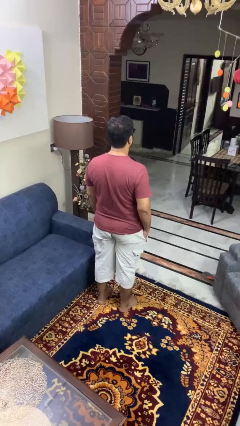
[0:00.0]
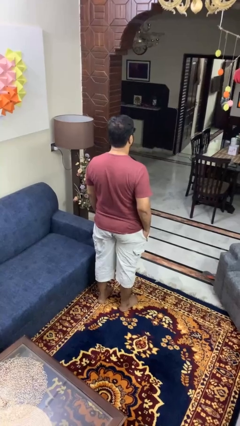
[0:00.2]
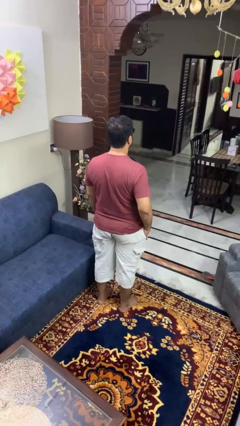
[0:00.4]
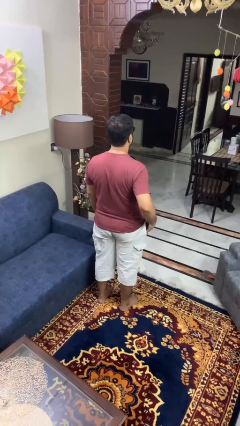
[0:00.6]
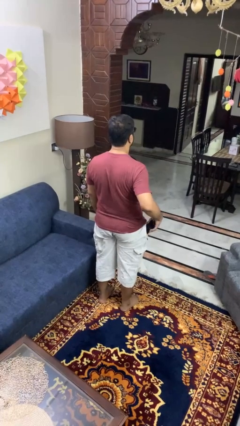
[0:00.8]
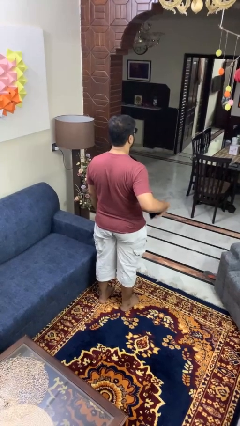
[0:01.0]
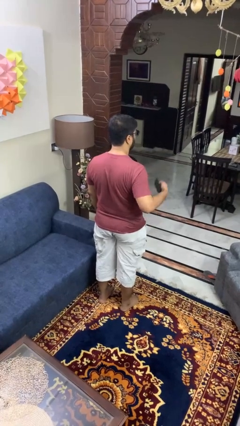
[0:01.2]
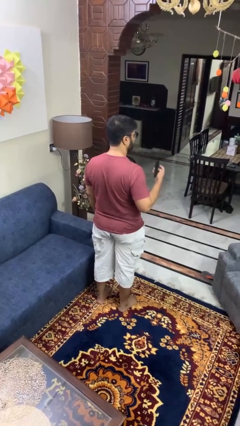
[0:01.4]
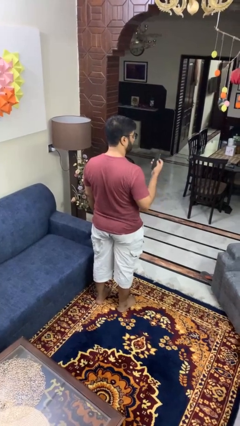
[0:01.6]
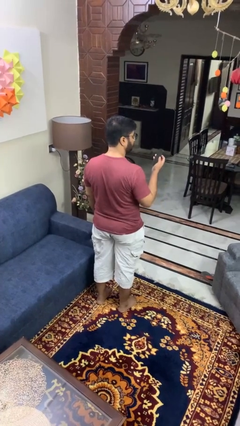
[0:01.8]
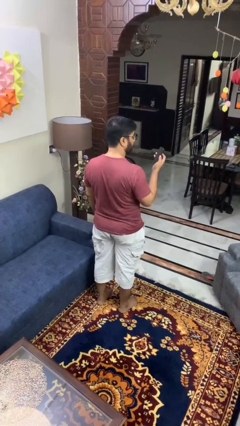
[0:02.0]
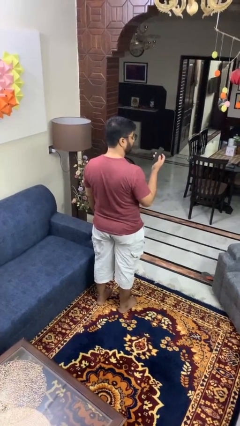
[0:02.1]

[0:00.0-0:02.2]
person takes phone from pocket

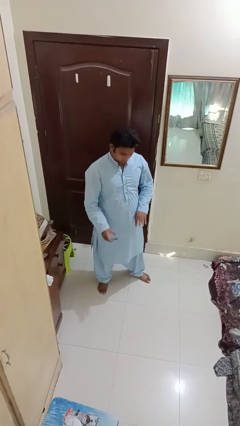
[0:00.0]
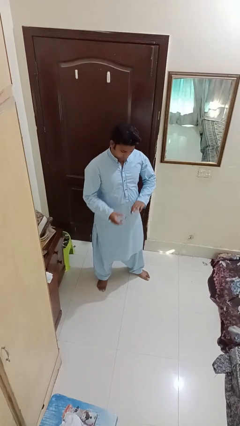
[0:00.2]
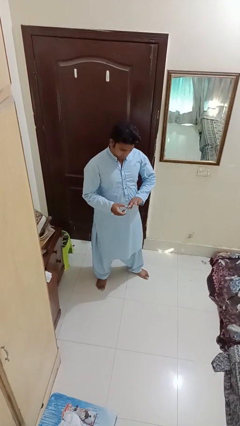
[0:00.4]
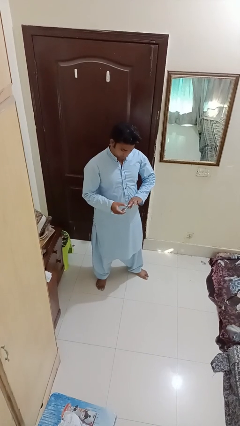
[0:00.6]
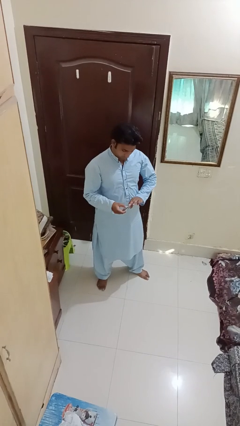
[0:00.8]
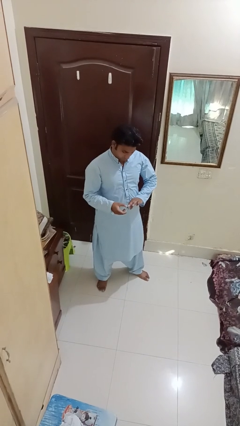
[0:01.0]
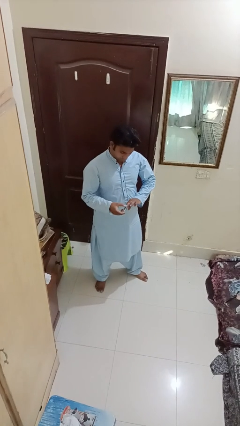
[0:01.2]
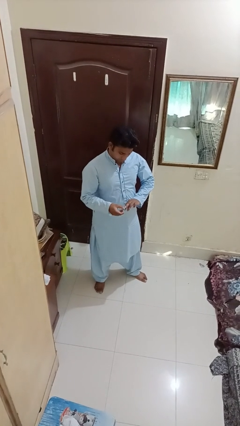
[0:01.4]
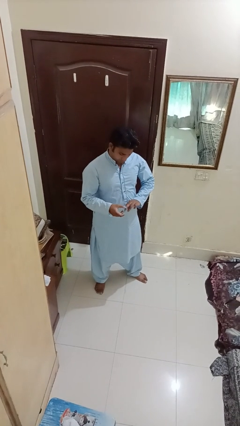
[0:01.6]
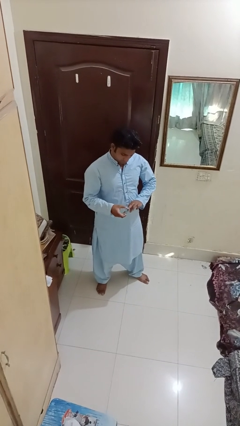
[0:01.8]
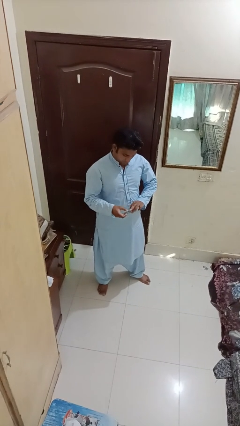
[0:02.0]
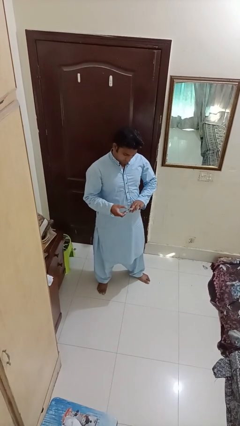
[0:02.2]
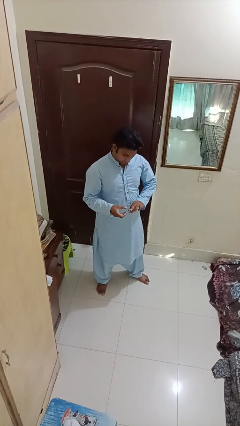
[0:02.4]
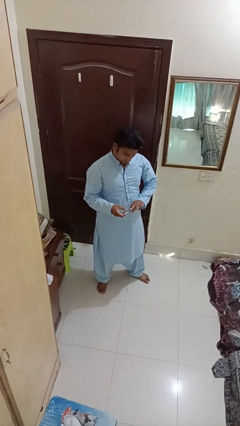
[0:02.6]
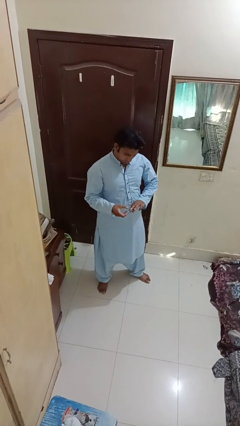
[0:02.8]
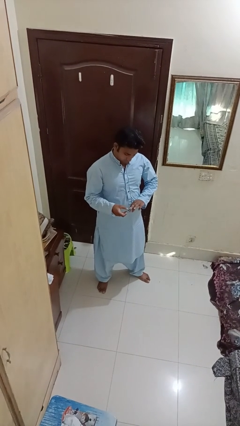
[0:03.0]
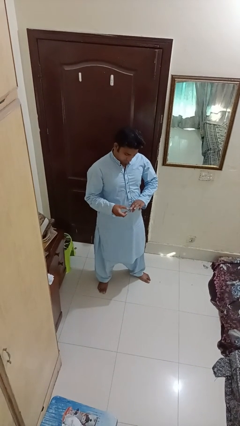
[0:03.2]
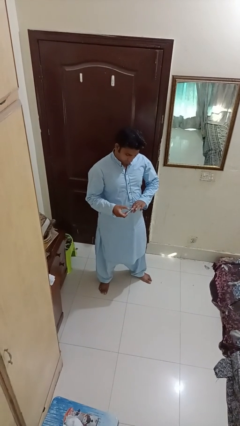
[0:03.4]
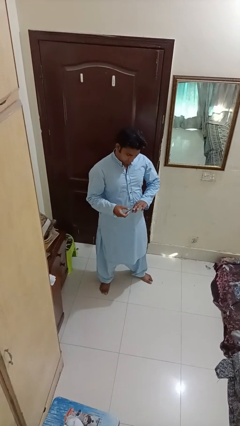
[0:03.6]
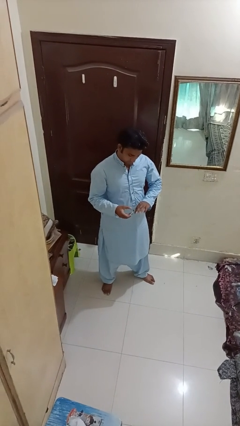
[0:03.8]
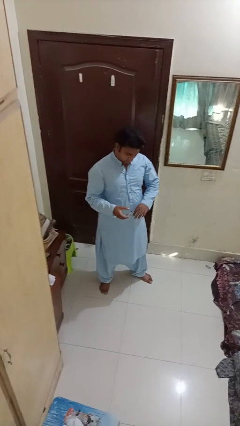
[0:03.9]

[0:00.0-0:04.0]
person clips fingernails

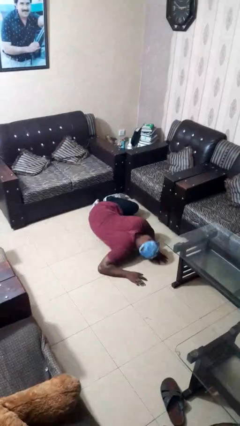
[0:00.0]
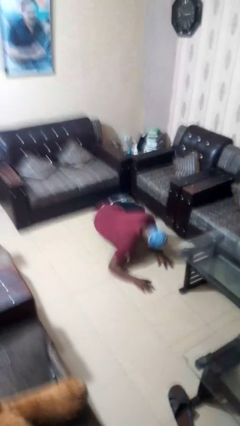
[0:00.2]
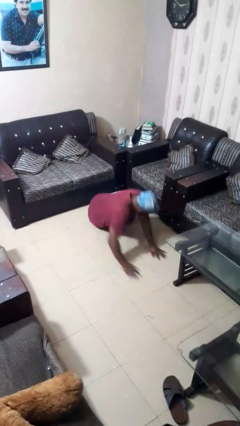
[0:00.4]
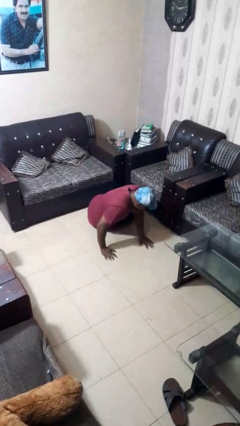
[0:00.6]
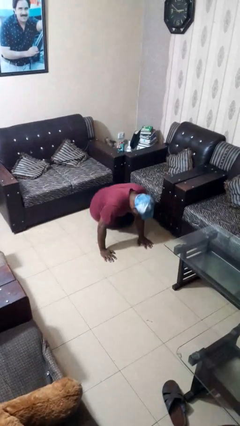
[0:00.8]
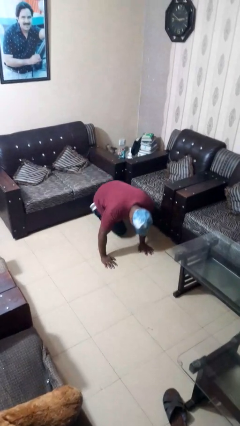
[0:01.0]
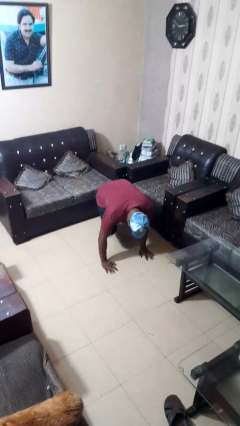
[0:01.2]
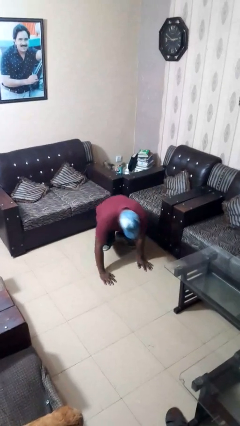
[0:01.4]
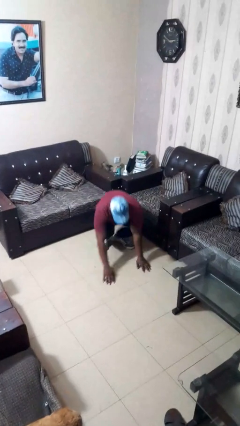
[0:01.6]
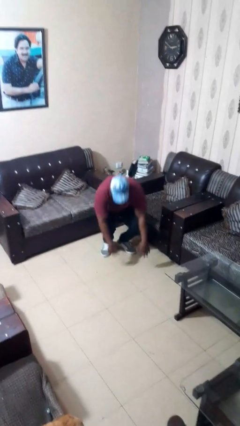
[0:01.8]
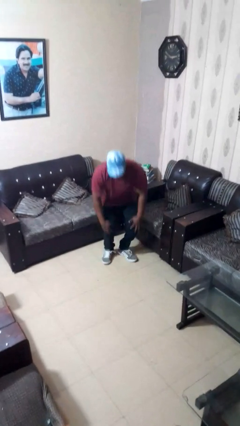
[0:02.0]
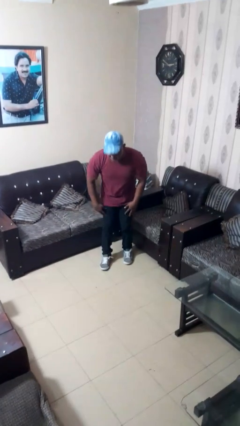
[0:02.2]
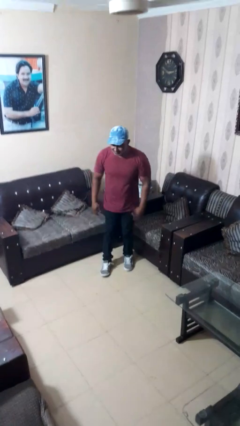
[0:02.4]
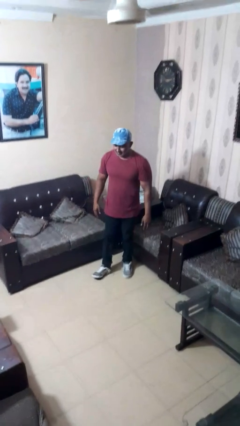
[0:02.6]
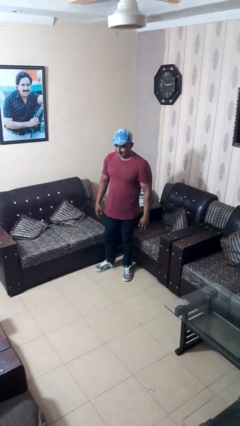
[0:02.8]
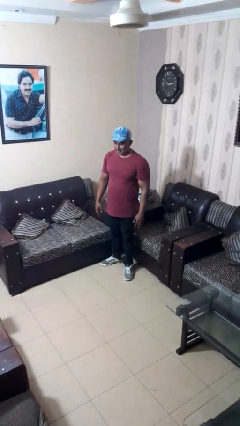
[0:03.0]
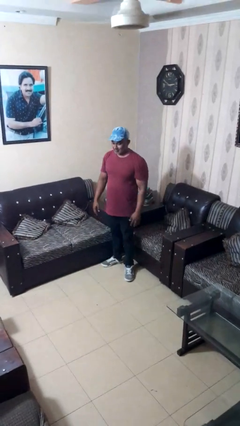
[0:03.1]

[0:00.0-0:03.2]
person stands up from floor

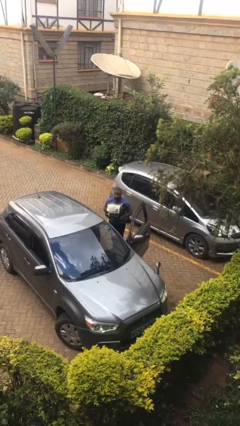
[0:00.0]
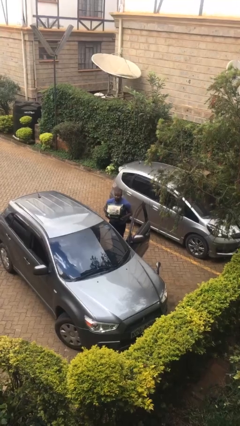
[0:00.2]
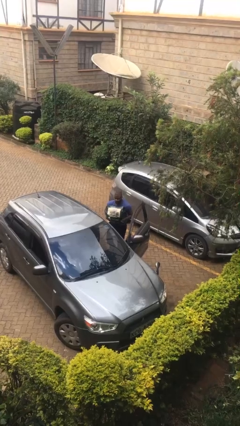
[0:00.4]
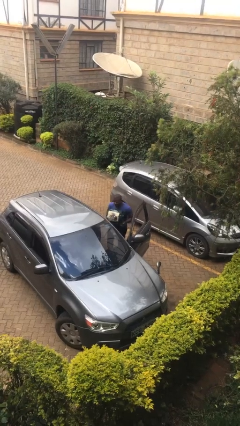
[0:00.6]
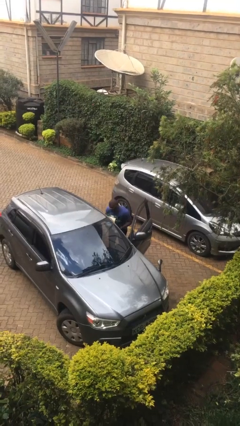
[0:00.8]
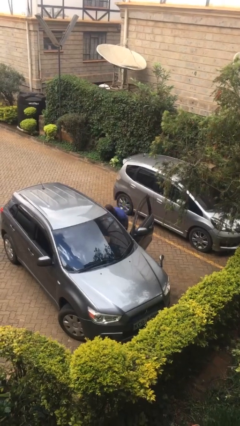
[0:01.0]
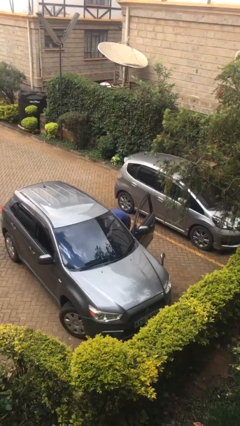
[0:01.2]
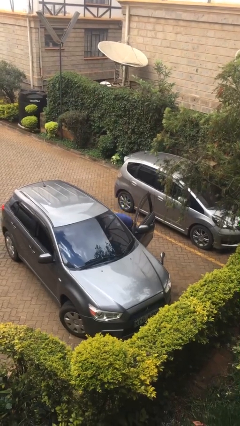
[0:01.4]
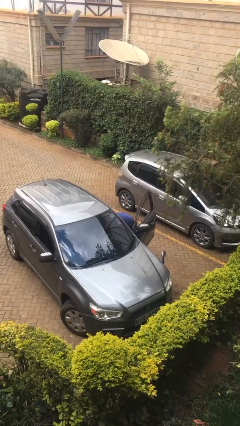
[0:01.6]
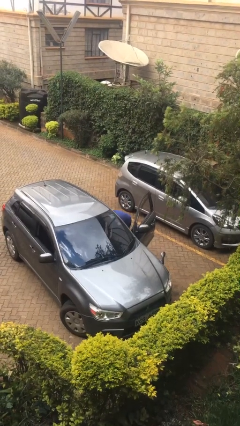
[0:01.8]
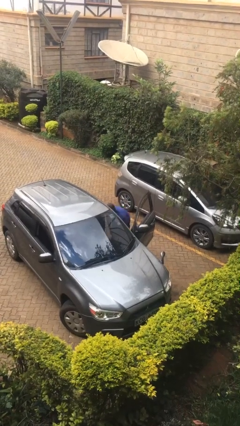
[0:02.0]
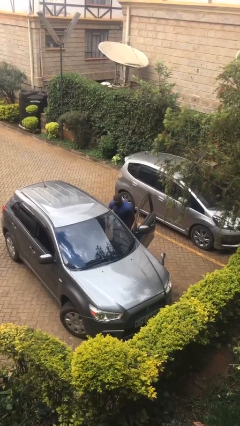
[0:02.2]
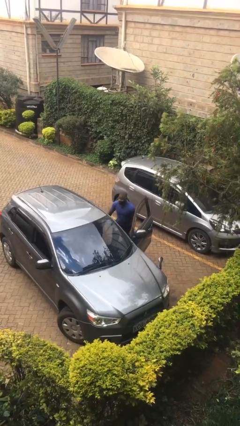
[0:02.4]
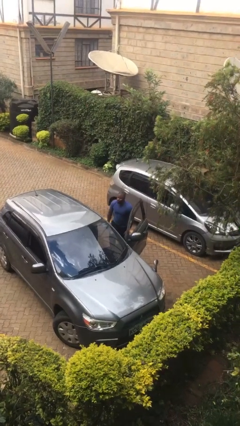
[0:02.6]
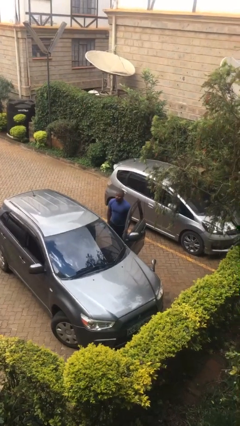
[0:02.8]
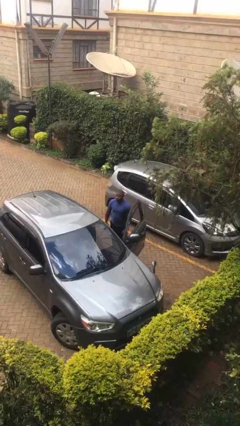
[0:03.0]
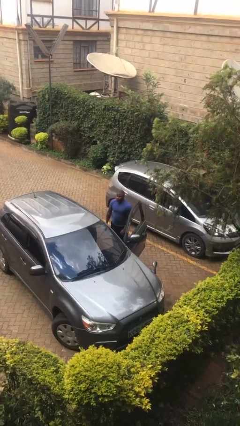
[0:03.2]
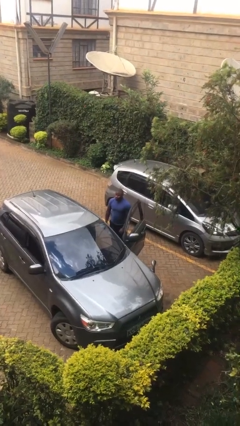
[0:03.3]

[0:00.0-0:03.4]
person loads car

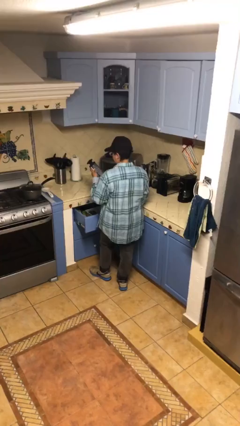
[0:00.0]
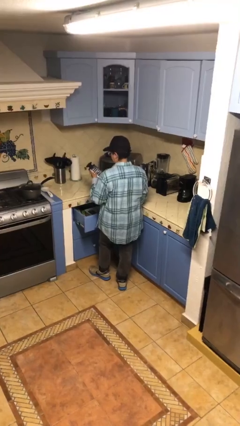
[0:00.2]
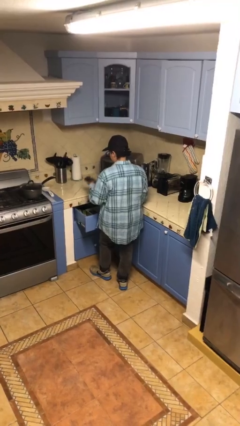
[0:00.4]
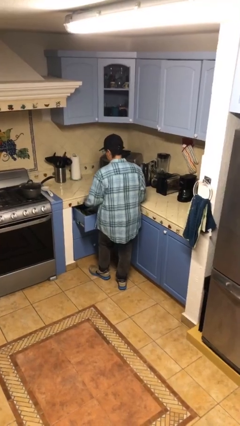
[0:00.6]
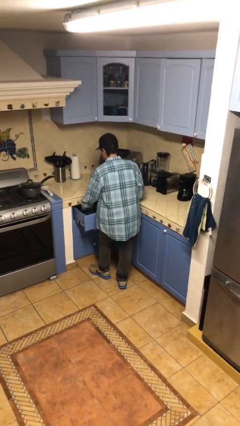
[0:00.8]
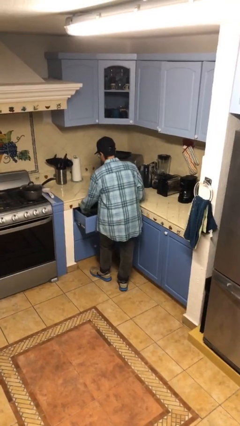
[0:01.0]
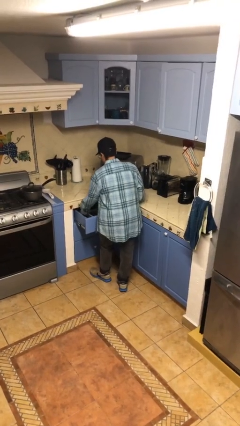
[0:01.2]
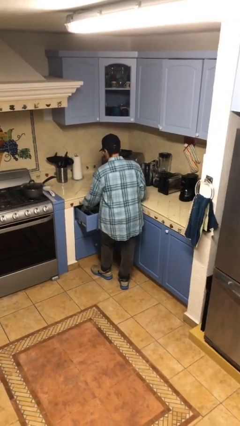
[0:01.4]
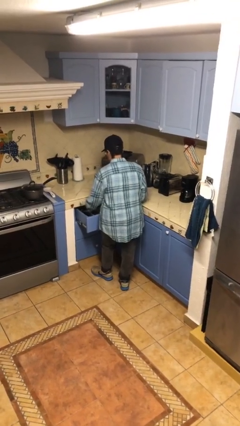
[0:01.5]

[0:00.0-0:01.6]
person puts object into kitchen drawer

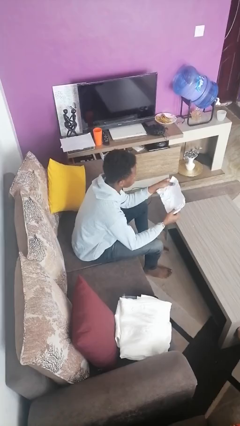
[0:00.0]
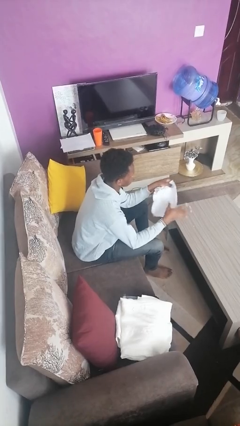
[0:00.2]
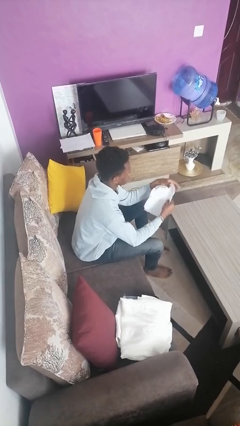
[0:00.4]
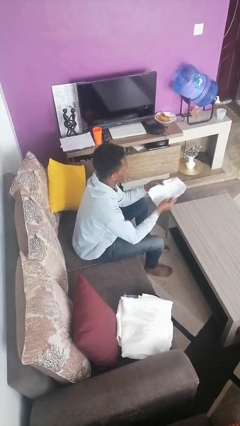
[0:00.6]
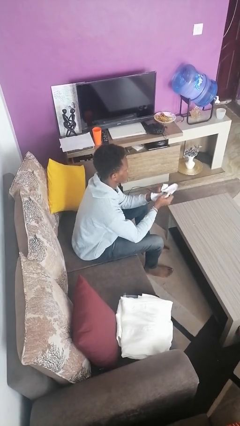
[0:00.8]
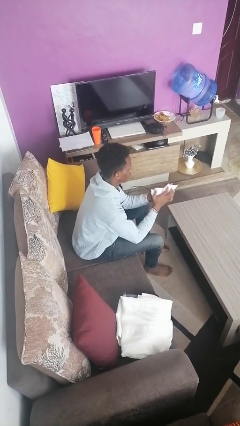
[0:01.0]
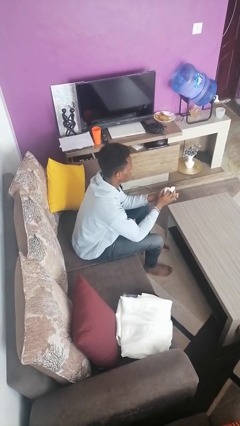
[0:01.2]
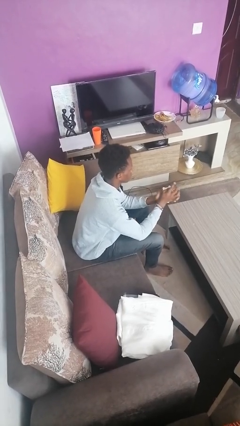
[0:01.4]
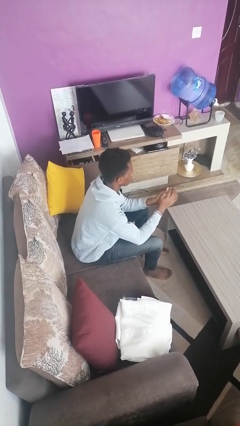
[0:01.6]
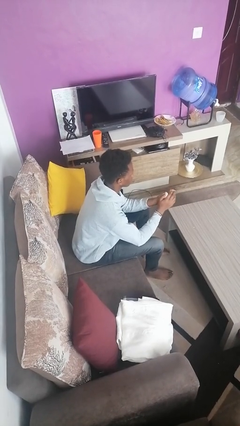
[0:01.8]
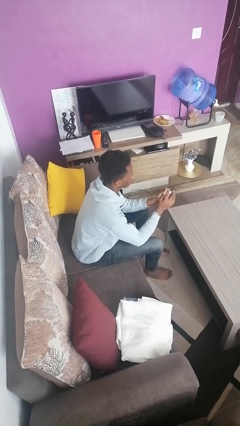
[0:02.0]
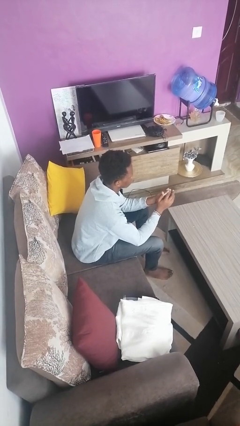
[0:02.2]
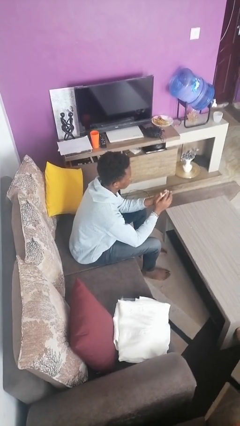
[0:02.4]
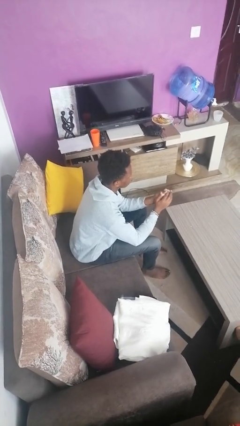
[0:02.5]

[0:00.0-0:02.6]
person crumples paper

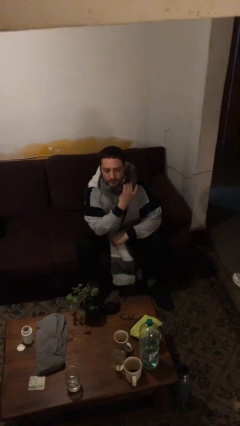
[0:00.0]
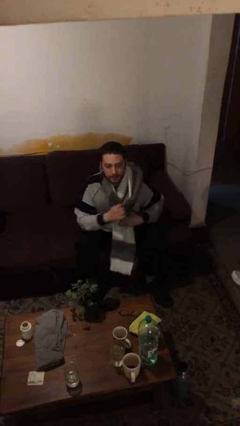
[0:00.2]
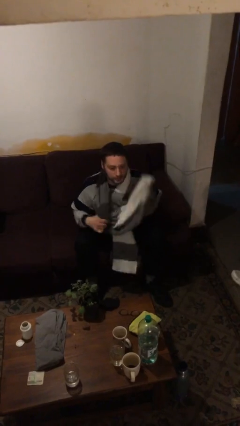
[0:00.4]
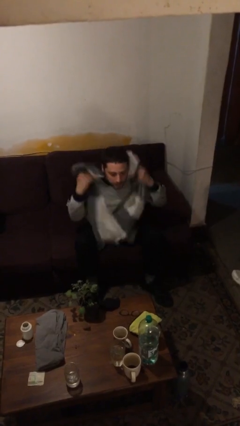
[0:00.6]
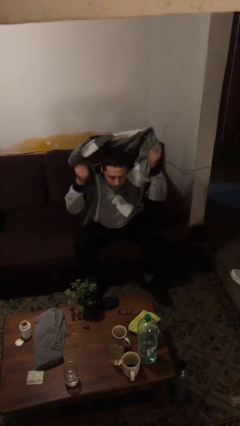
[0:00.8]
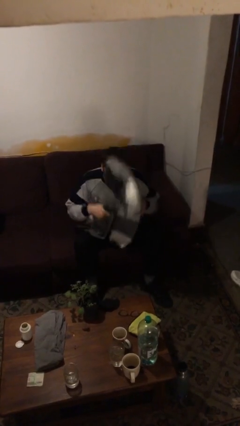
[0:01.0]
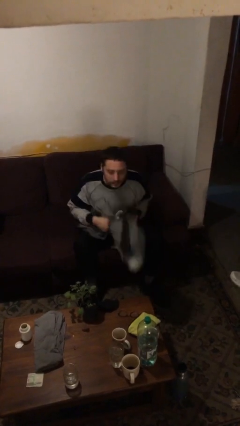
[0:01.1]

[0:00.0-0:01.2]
person takes off scarf
